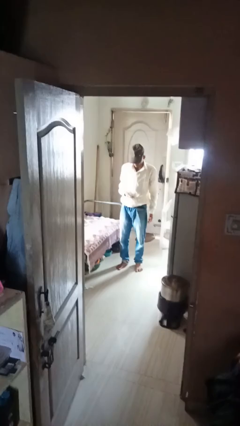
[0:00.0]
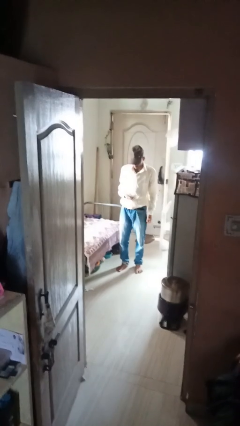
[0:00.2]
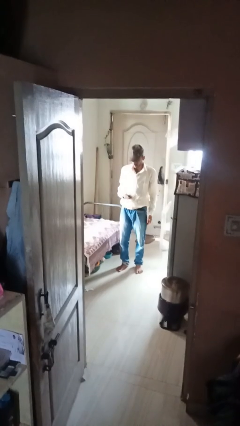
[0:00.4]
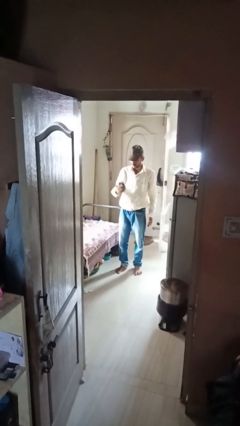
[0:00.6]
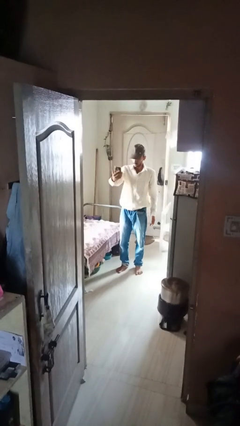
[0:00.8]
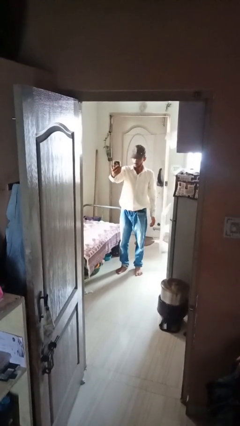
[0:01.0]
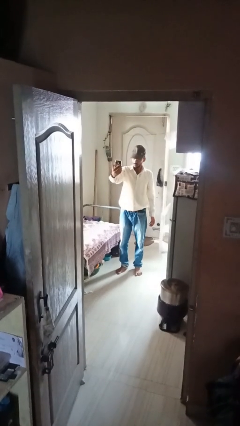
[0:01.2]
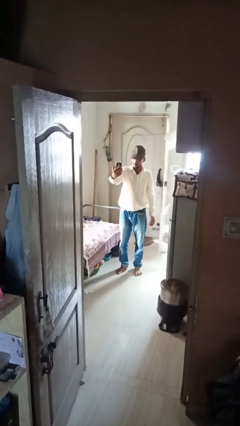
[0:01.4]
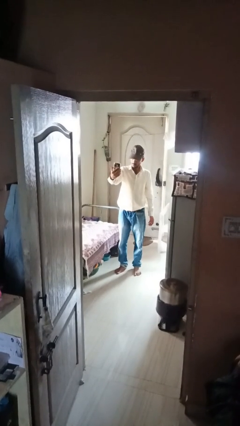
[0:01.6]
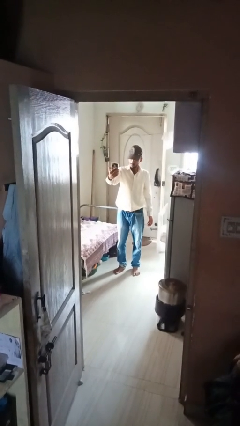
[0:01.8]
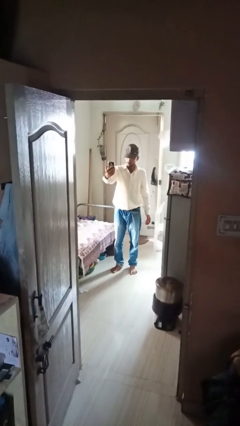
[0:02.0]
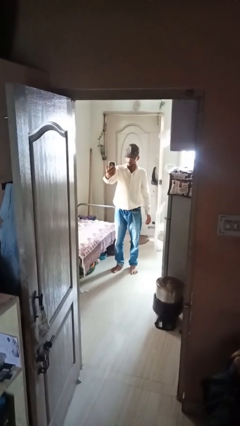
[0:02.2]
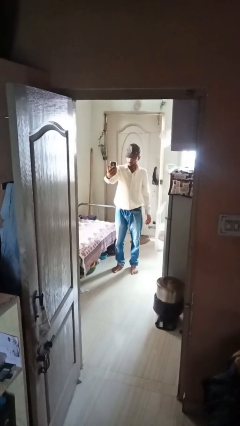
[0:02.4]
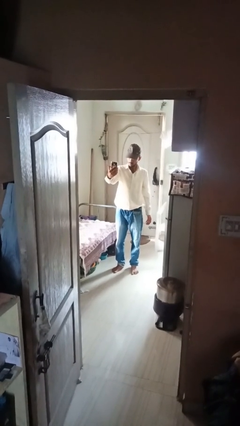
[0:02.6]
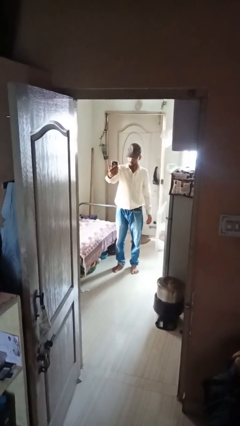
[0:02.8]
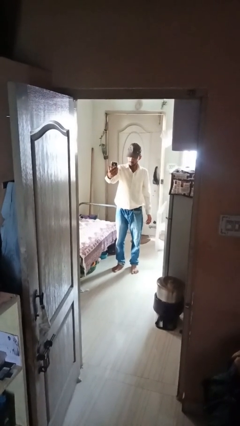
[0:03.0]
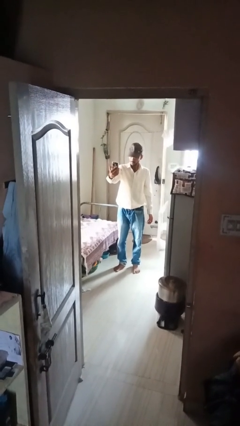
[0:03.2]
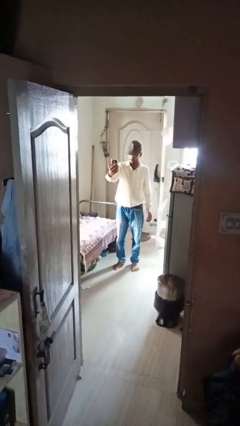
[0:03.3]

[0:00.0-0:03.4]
person takes selfie

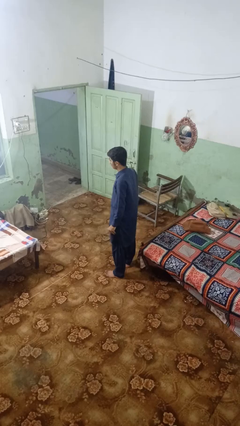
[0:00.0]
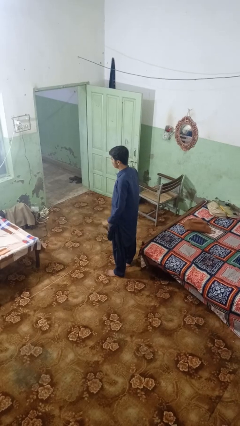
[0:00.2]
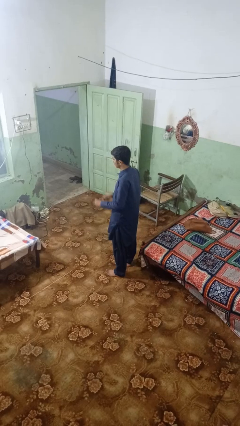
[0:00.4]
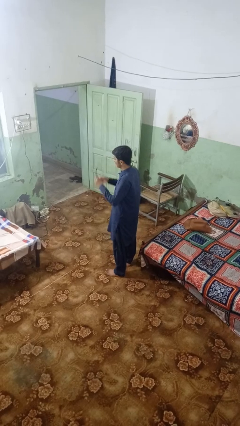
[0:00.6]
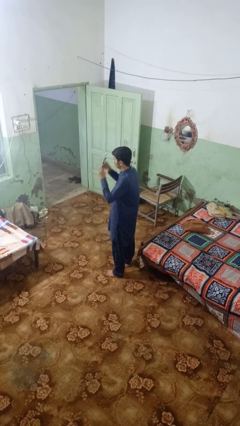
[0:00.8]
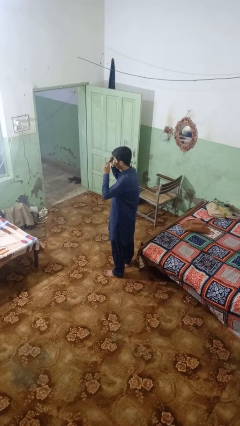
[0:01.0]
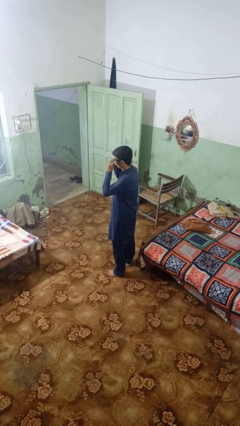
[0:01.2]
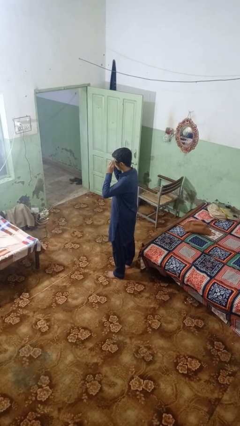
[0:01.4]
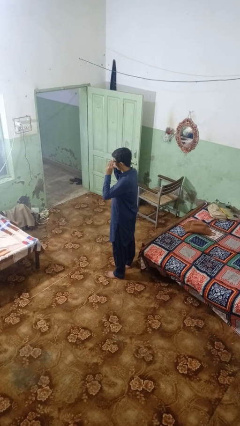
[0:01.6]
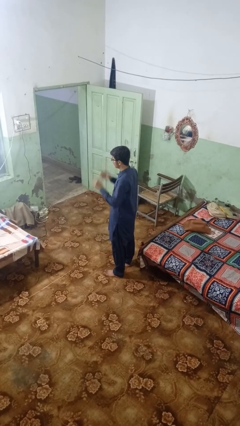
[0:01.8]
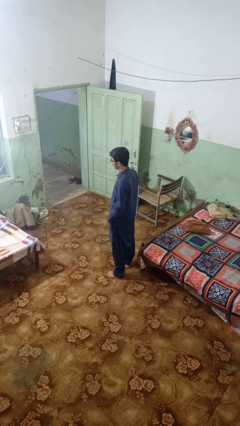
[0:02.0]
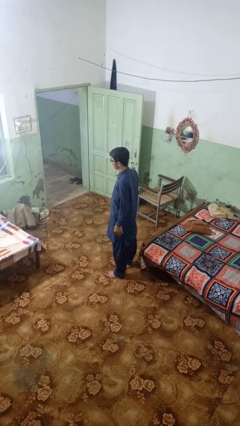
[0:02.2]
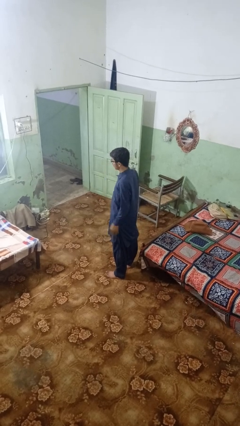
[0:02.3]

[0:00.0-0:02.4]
person puts on glasses

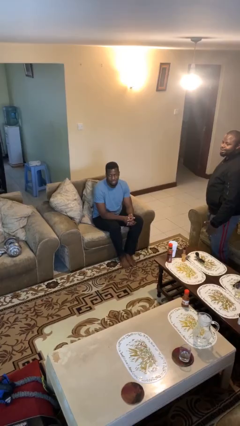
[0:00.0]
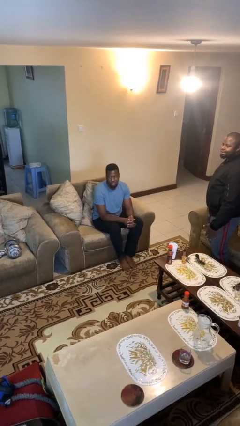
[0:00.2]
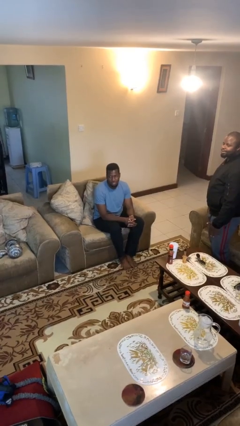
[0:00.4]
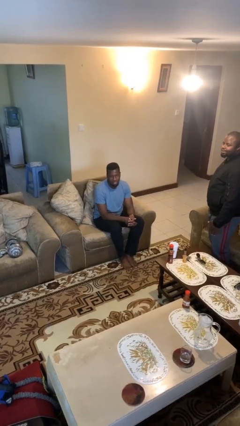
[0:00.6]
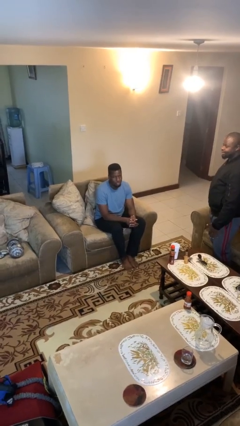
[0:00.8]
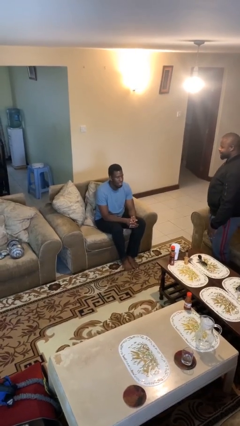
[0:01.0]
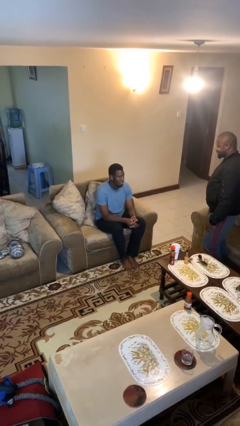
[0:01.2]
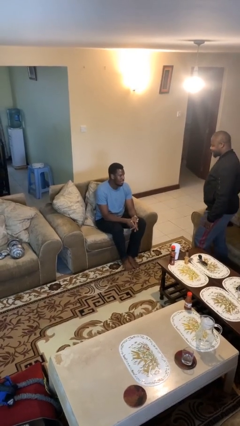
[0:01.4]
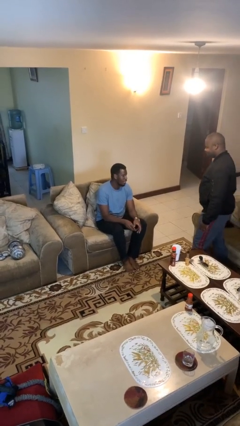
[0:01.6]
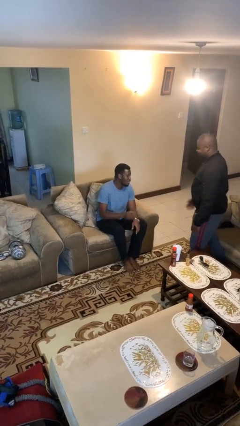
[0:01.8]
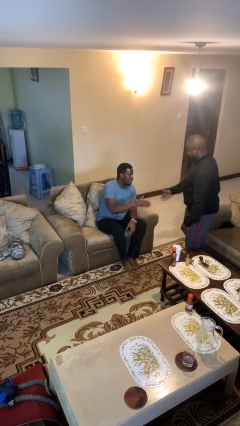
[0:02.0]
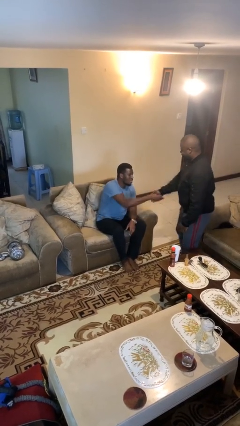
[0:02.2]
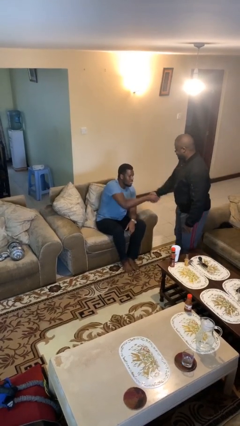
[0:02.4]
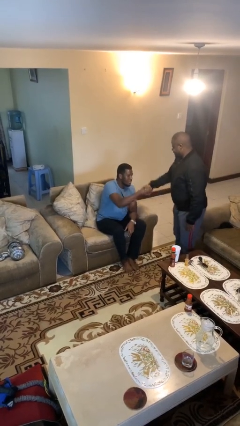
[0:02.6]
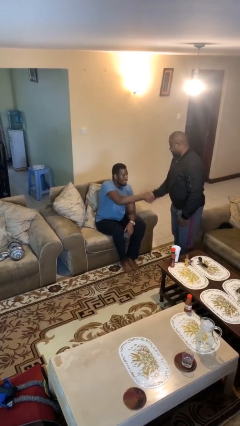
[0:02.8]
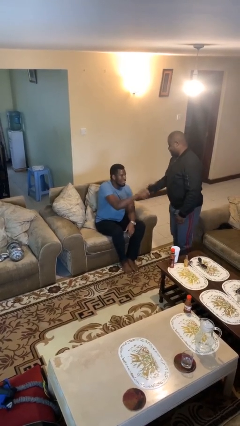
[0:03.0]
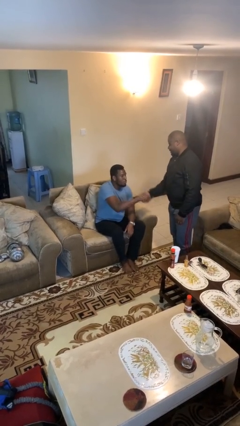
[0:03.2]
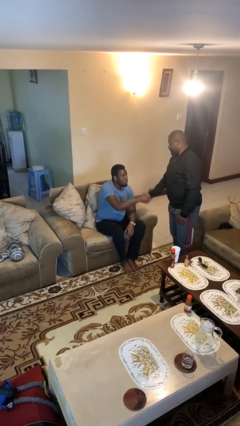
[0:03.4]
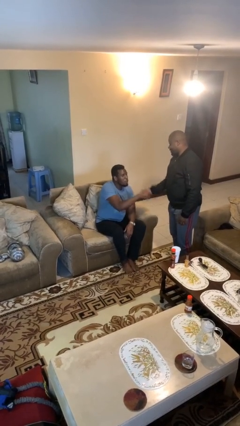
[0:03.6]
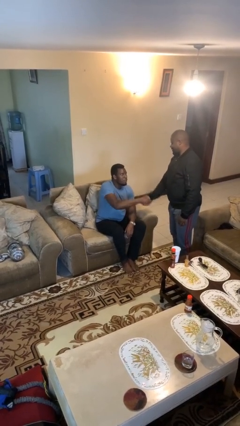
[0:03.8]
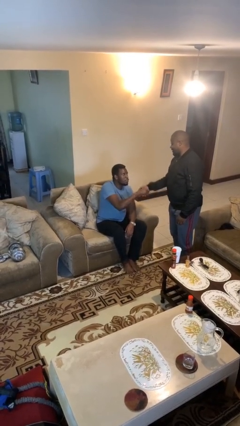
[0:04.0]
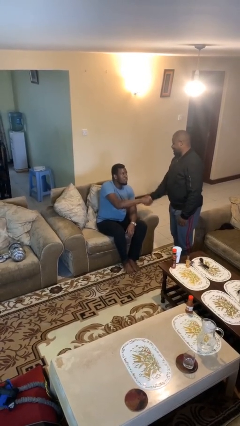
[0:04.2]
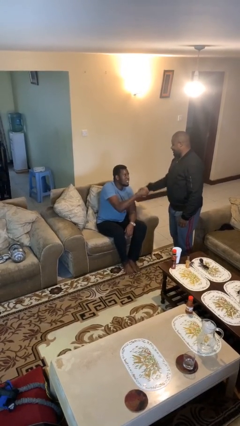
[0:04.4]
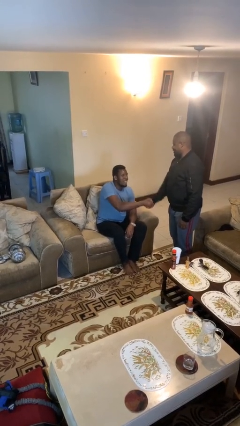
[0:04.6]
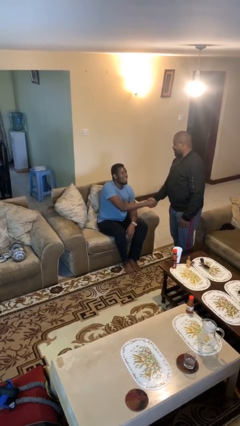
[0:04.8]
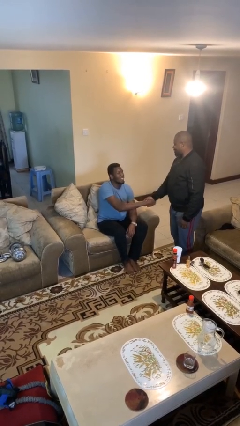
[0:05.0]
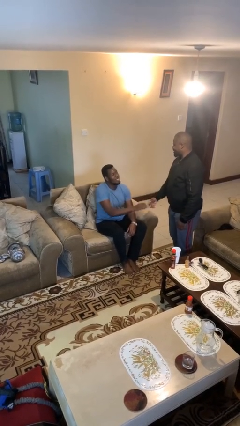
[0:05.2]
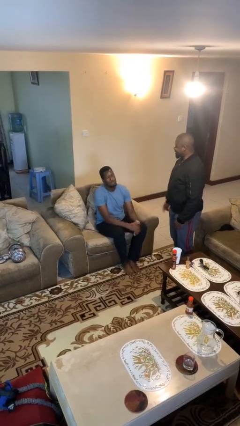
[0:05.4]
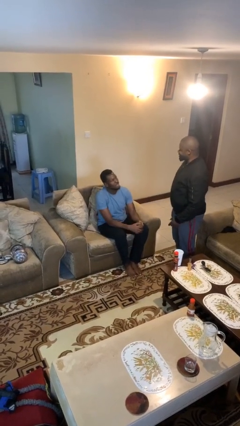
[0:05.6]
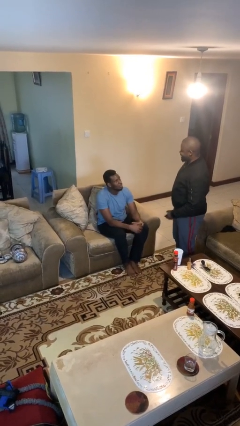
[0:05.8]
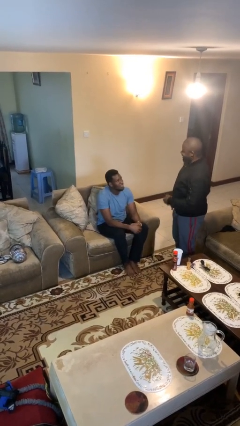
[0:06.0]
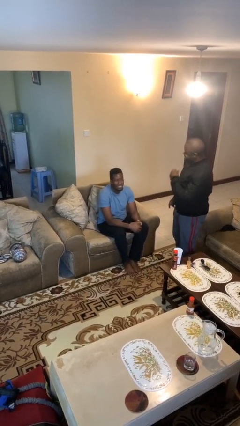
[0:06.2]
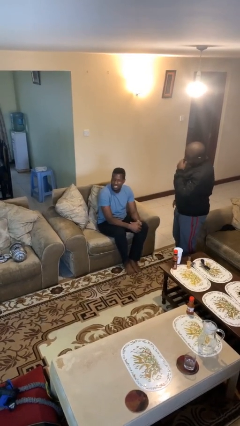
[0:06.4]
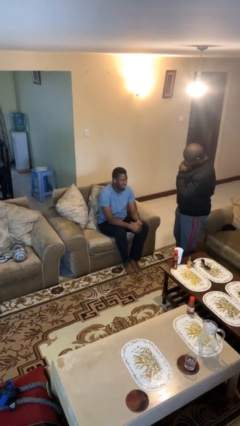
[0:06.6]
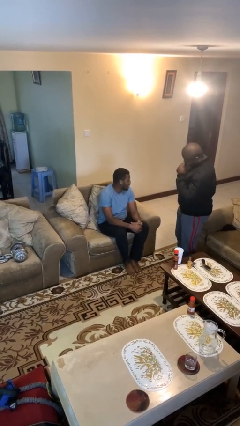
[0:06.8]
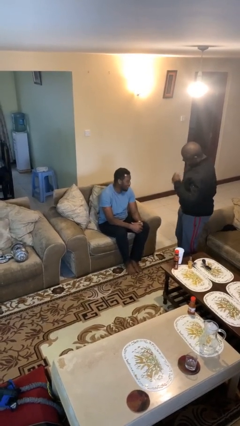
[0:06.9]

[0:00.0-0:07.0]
person shakes hand

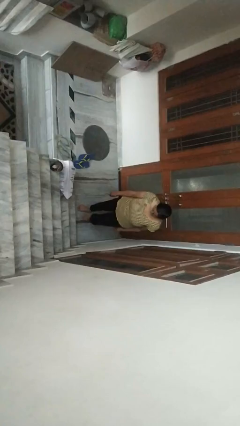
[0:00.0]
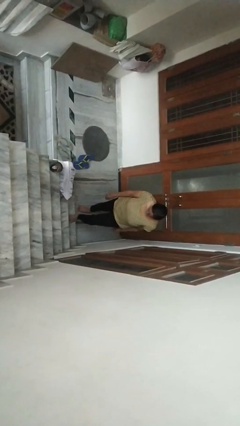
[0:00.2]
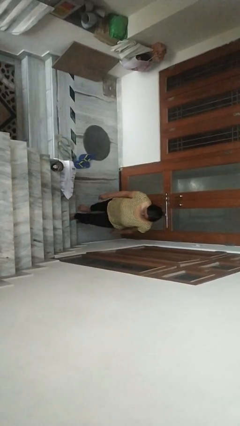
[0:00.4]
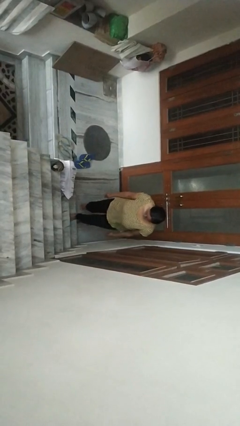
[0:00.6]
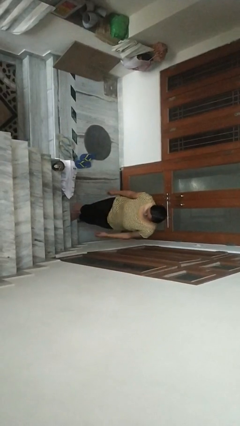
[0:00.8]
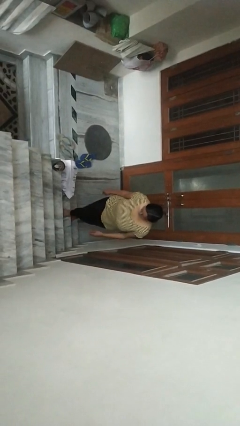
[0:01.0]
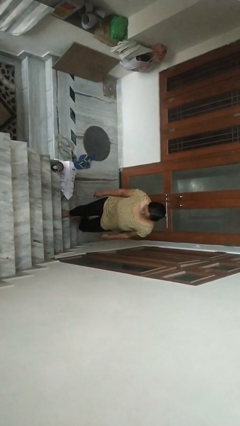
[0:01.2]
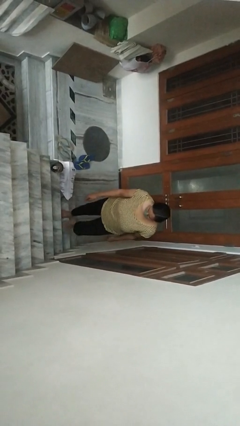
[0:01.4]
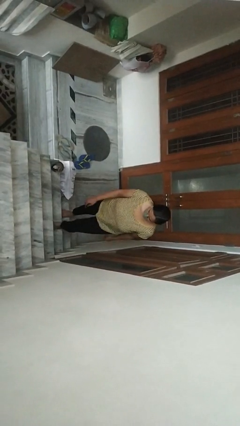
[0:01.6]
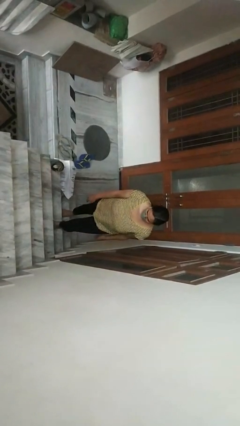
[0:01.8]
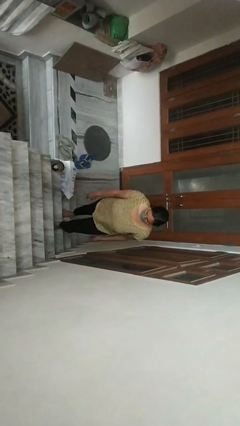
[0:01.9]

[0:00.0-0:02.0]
person climbs up stairs

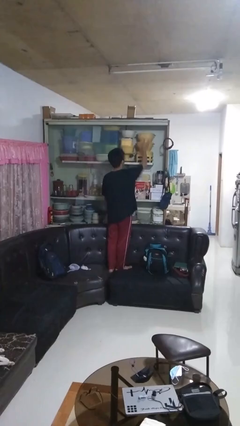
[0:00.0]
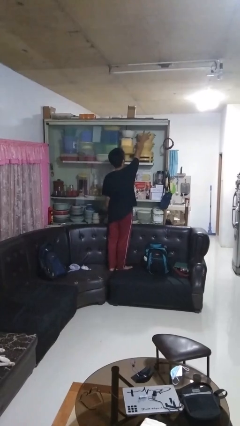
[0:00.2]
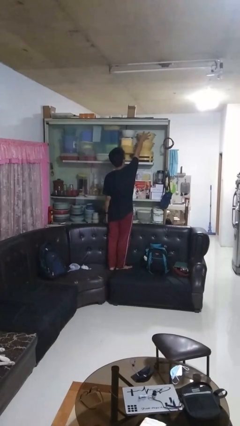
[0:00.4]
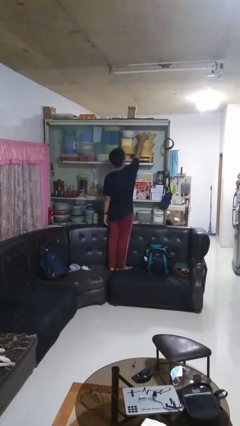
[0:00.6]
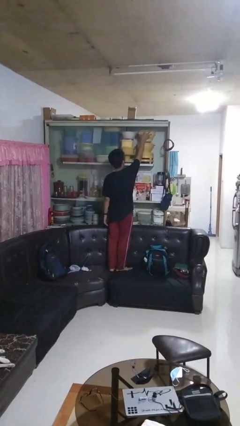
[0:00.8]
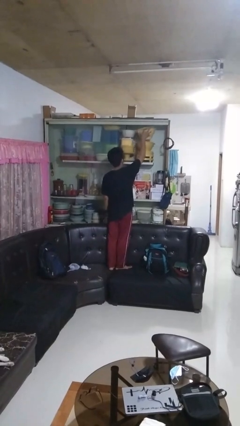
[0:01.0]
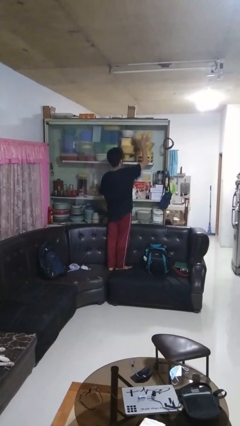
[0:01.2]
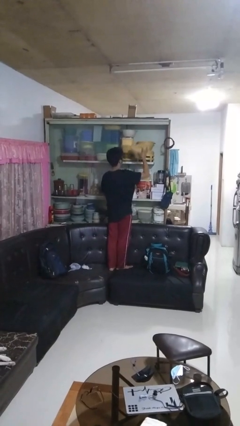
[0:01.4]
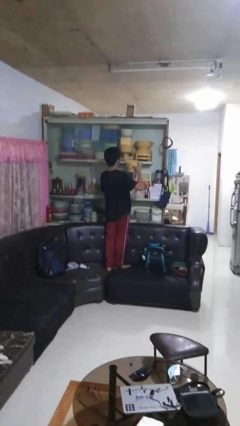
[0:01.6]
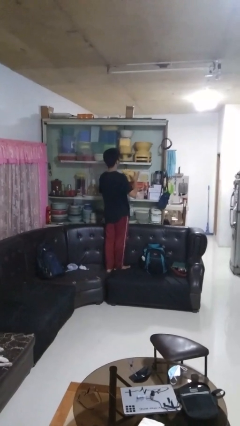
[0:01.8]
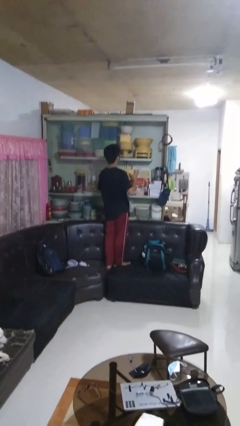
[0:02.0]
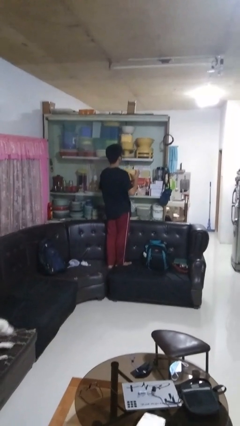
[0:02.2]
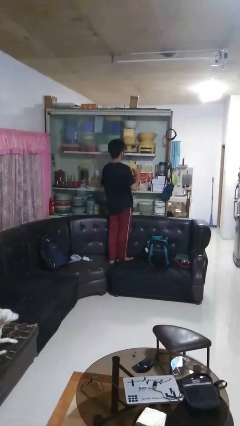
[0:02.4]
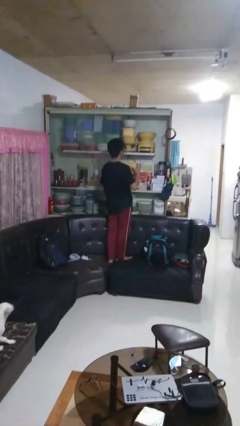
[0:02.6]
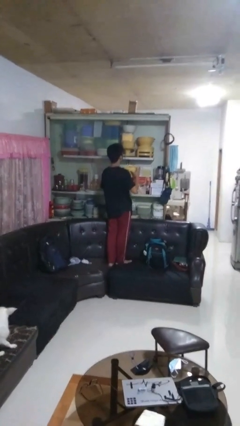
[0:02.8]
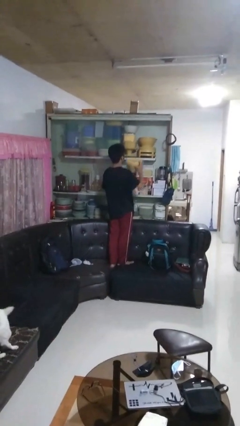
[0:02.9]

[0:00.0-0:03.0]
person picks up object from cabinet
